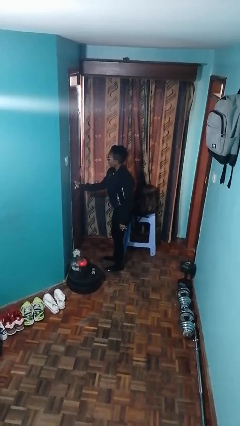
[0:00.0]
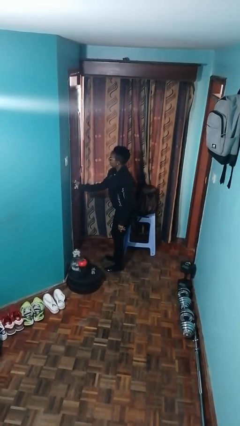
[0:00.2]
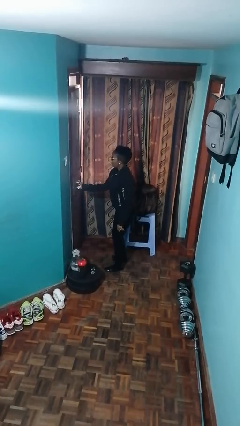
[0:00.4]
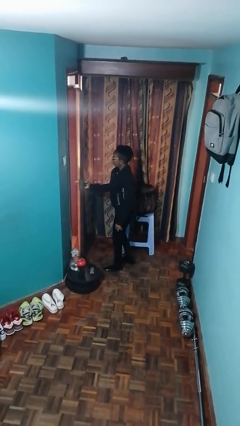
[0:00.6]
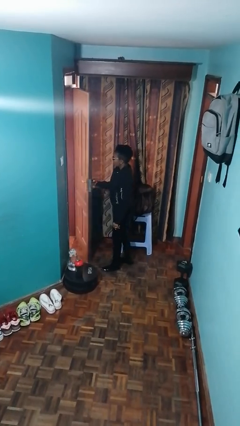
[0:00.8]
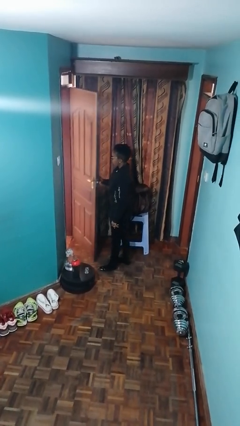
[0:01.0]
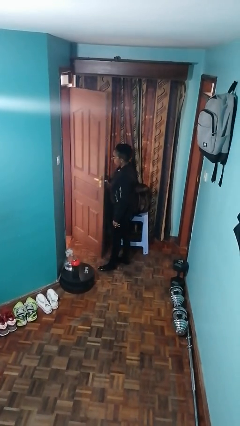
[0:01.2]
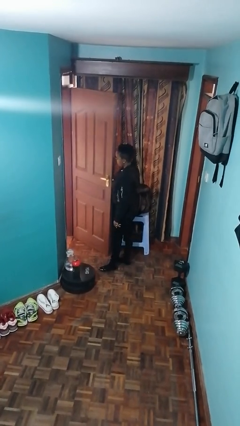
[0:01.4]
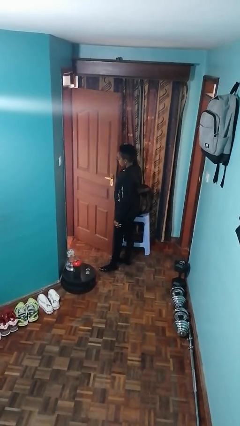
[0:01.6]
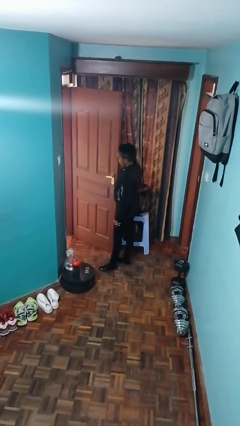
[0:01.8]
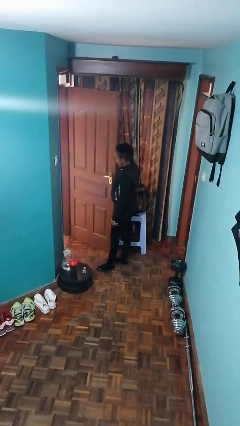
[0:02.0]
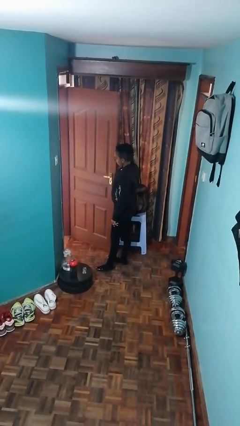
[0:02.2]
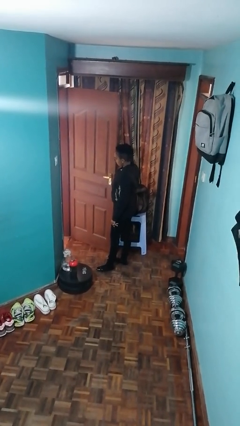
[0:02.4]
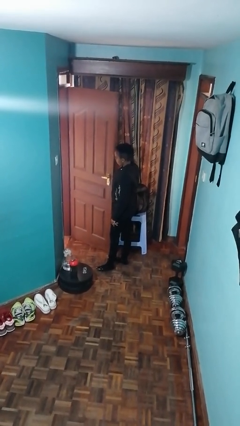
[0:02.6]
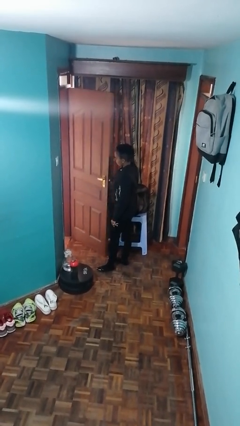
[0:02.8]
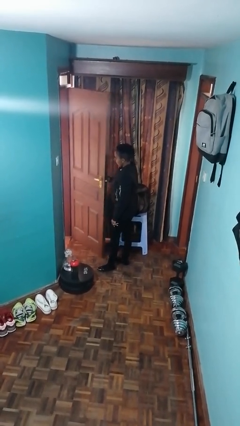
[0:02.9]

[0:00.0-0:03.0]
person opens facility door

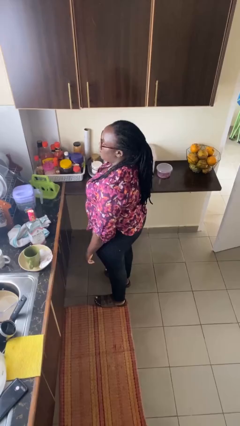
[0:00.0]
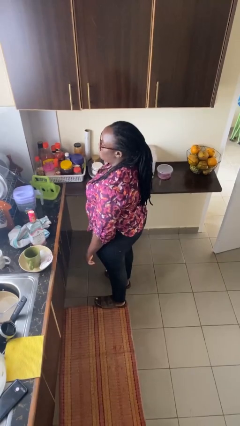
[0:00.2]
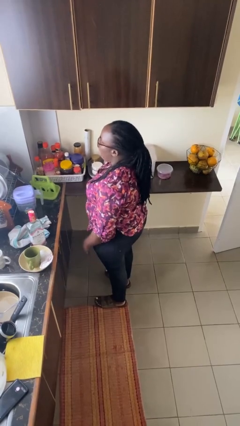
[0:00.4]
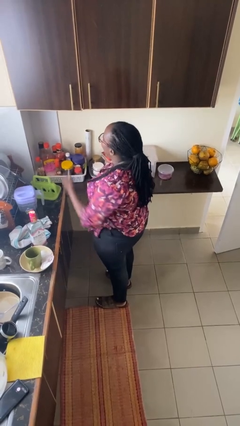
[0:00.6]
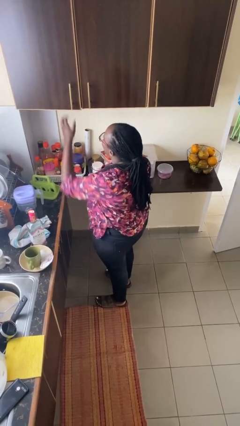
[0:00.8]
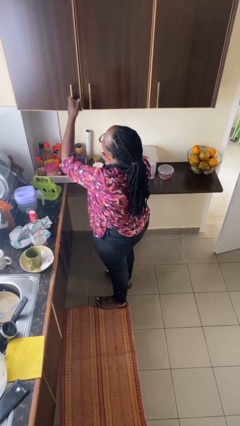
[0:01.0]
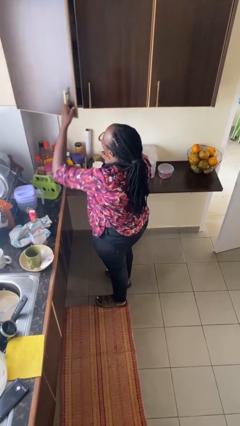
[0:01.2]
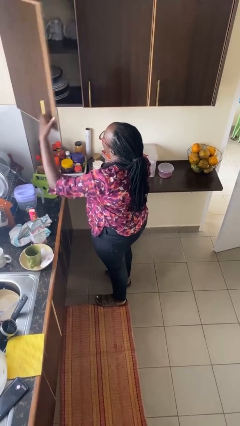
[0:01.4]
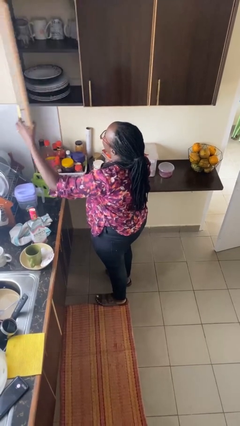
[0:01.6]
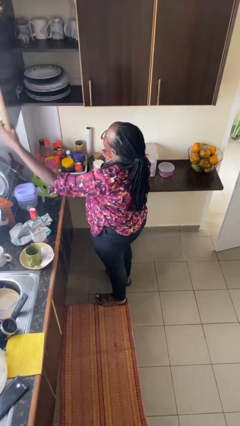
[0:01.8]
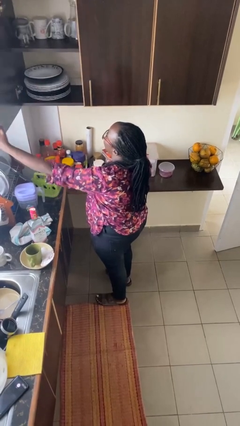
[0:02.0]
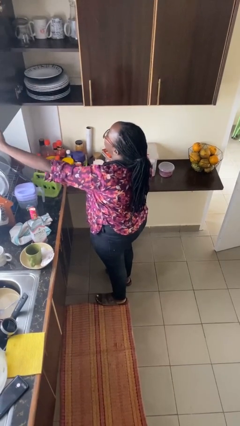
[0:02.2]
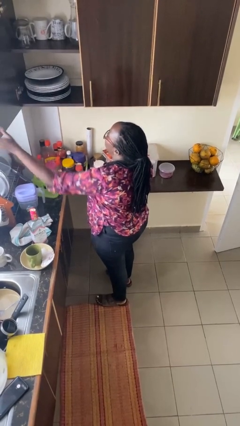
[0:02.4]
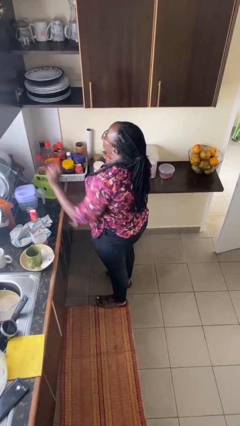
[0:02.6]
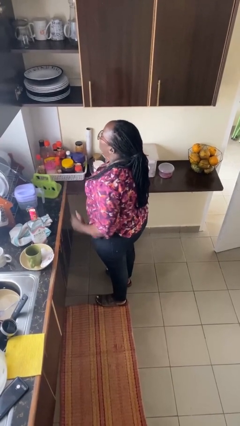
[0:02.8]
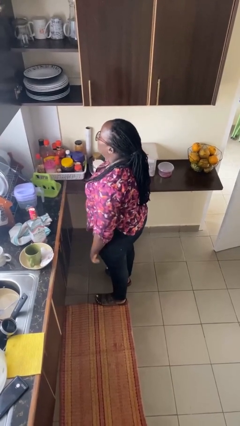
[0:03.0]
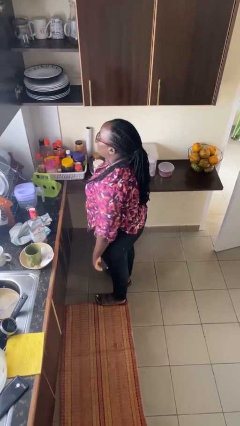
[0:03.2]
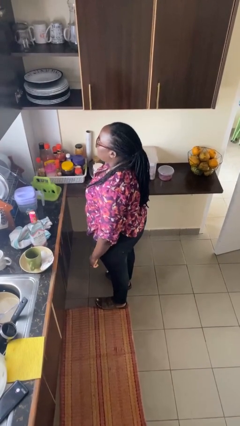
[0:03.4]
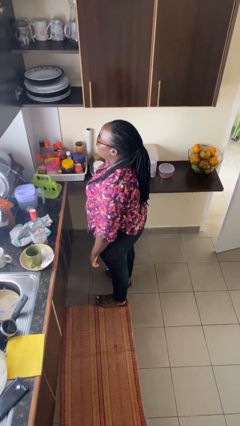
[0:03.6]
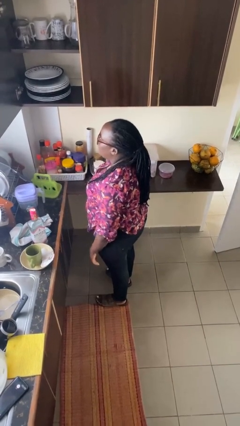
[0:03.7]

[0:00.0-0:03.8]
person opens cabinet

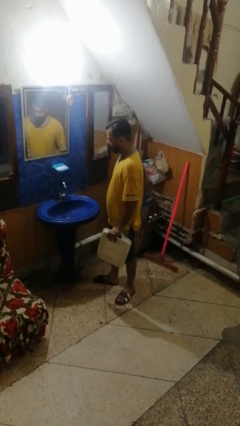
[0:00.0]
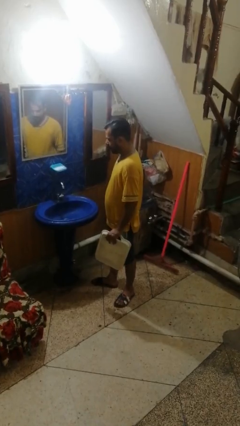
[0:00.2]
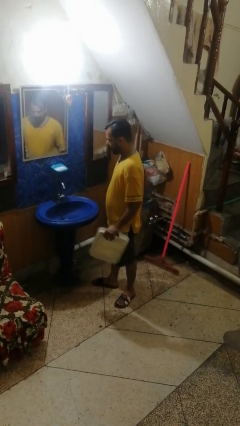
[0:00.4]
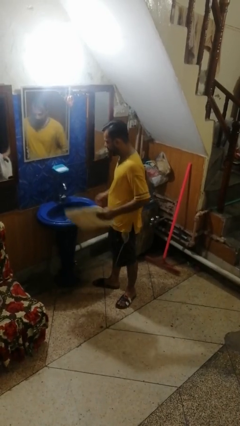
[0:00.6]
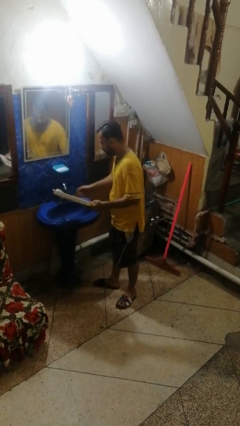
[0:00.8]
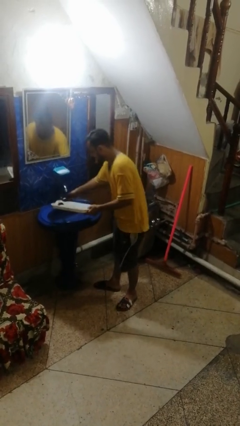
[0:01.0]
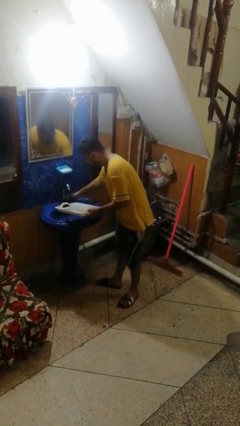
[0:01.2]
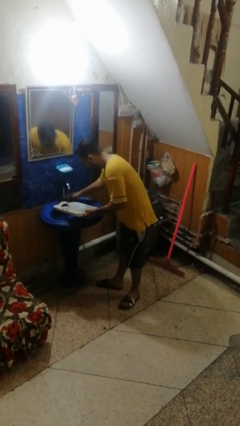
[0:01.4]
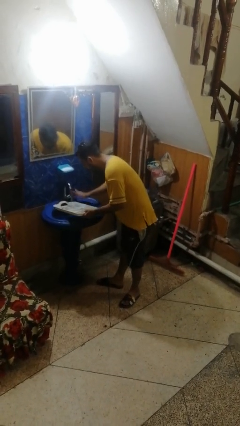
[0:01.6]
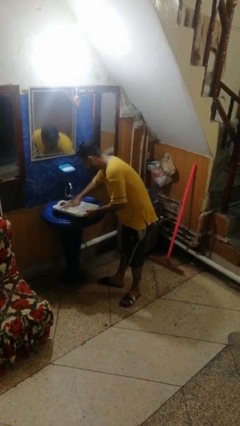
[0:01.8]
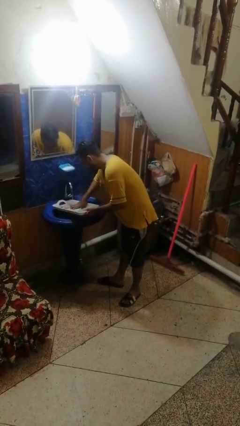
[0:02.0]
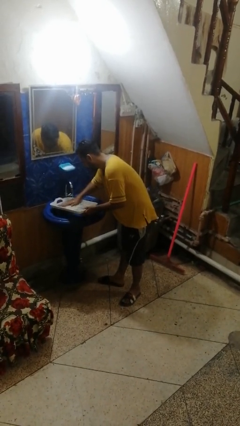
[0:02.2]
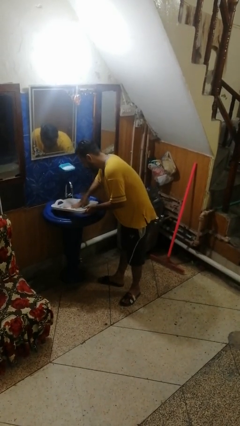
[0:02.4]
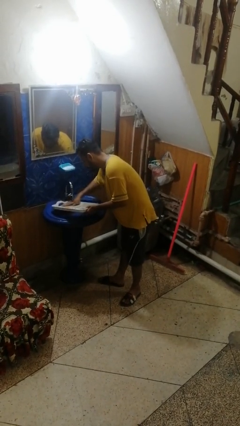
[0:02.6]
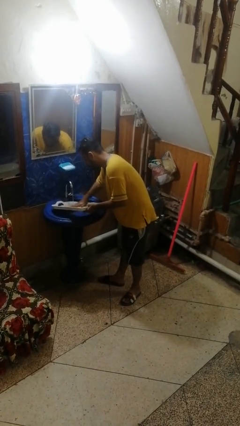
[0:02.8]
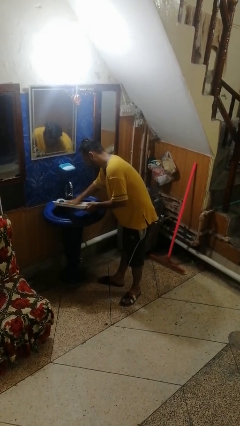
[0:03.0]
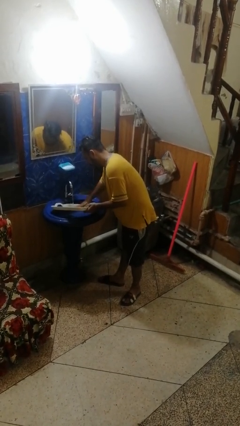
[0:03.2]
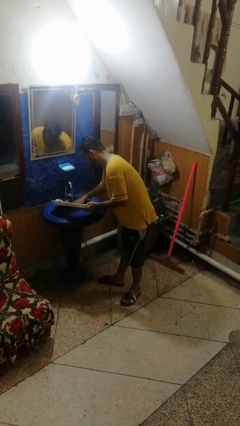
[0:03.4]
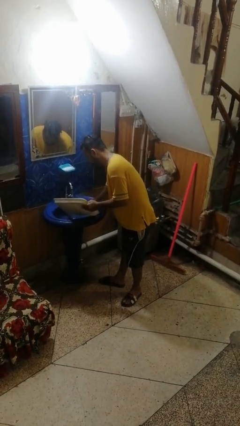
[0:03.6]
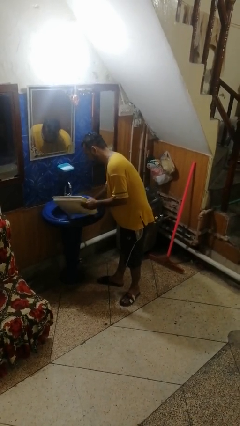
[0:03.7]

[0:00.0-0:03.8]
person washes dish

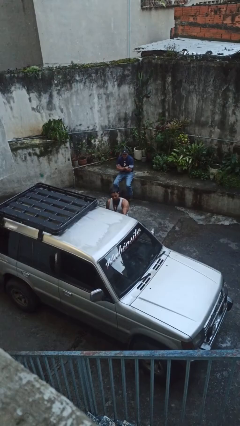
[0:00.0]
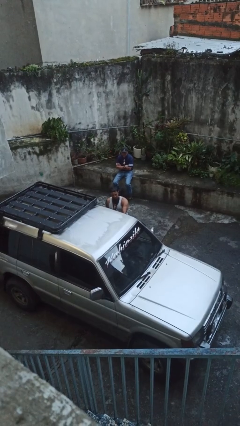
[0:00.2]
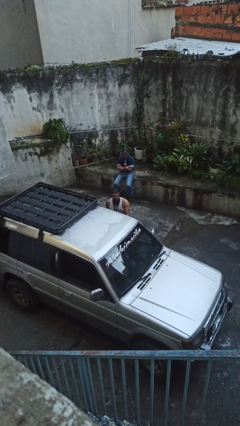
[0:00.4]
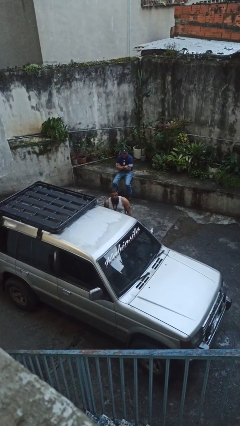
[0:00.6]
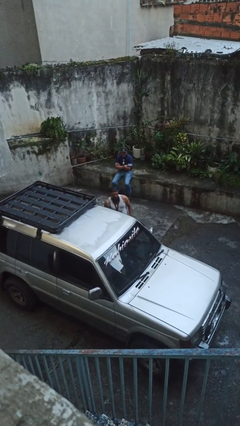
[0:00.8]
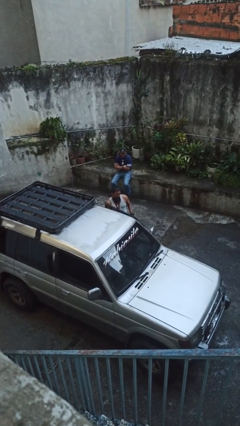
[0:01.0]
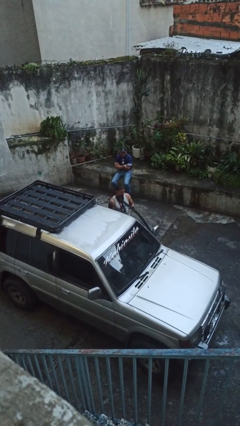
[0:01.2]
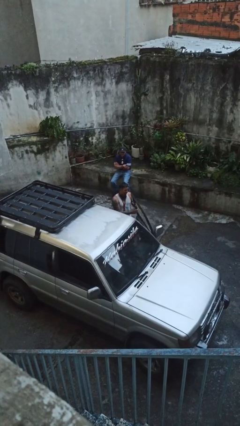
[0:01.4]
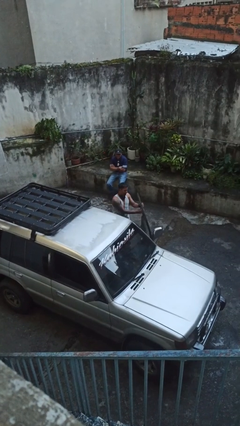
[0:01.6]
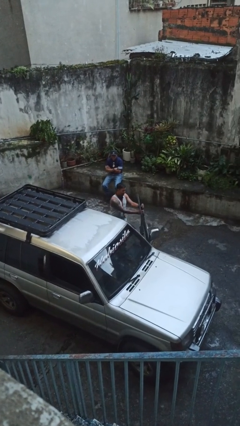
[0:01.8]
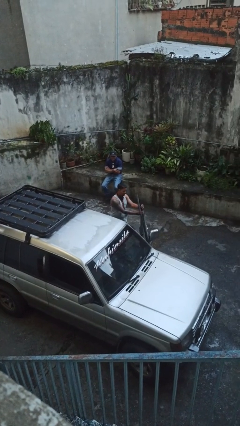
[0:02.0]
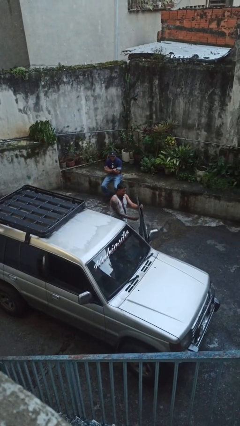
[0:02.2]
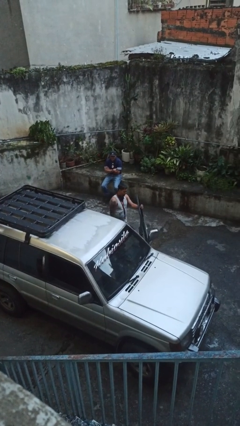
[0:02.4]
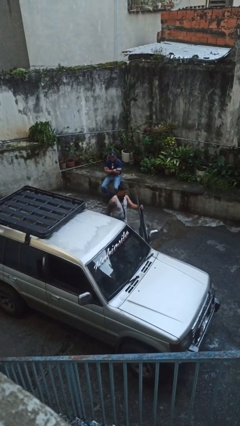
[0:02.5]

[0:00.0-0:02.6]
person opens car door

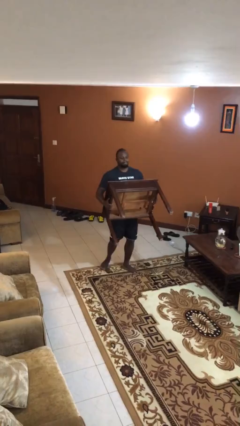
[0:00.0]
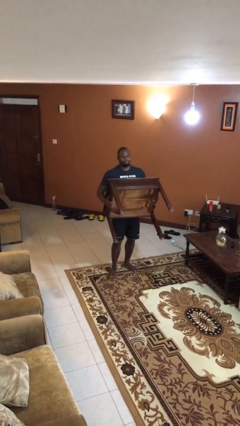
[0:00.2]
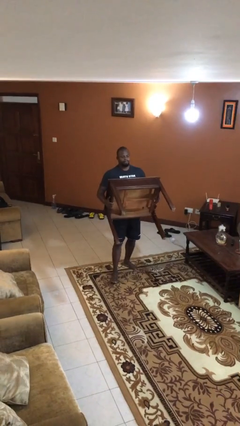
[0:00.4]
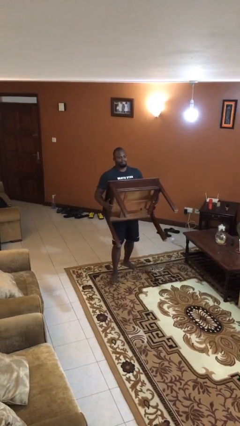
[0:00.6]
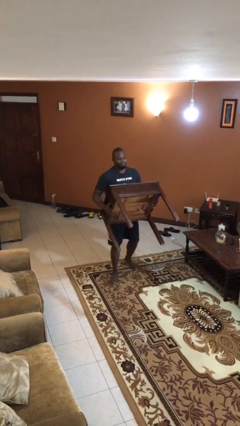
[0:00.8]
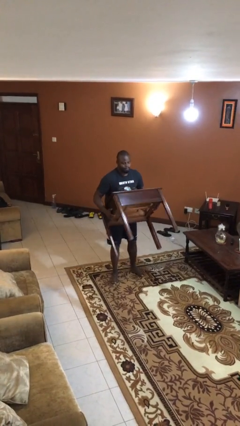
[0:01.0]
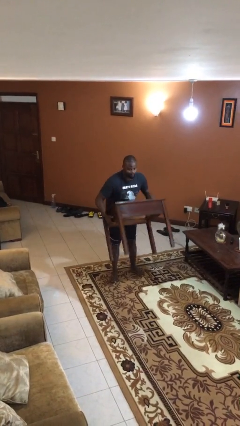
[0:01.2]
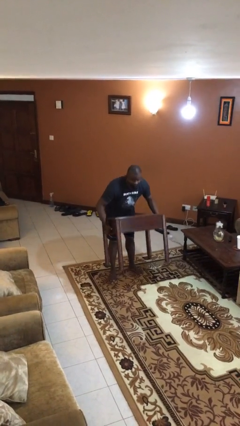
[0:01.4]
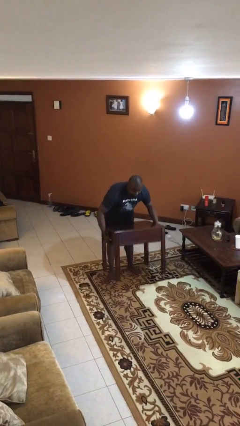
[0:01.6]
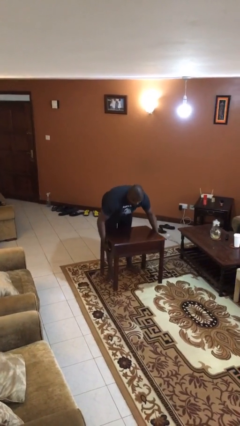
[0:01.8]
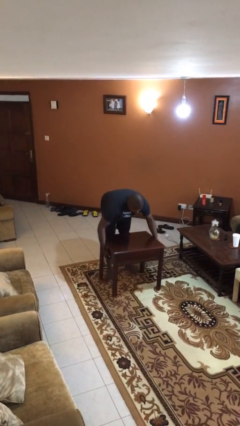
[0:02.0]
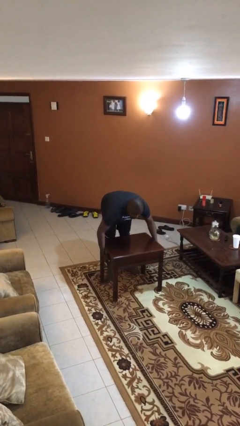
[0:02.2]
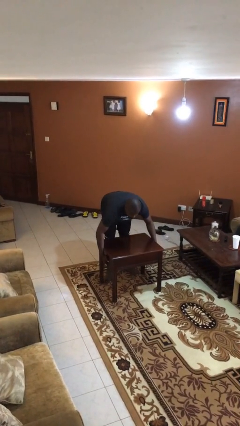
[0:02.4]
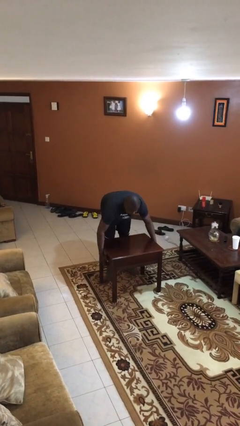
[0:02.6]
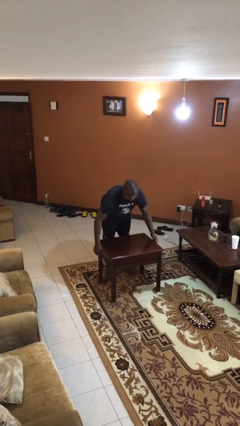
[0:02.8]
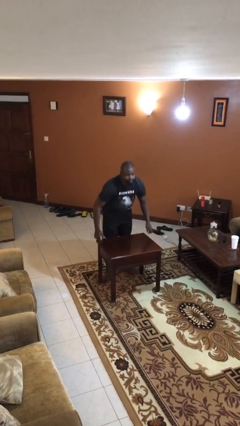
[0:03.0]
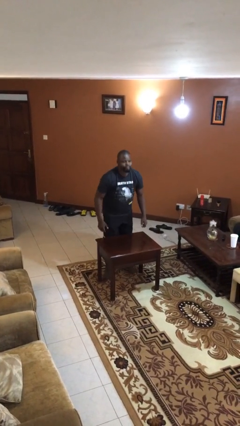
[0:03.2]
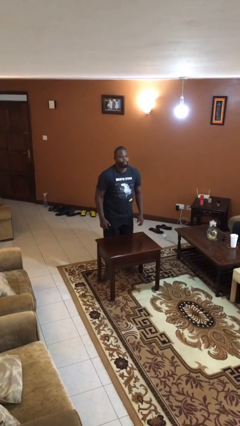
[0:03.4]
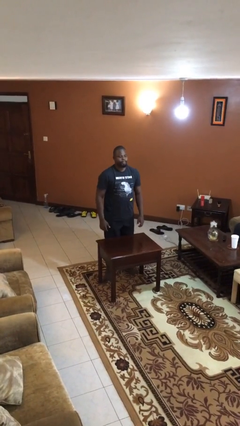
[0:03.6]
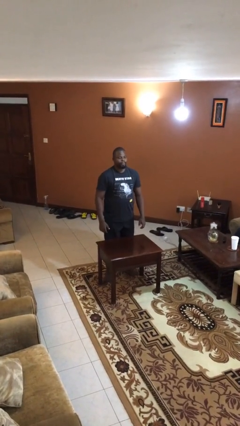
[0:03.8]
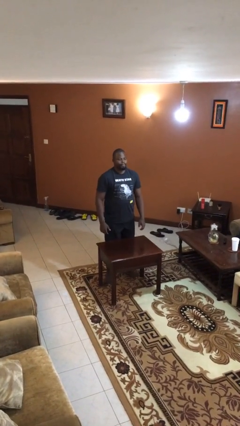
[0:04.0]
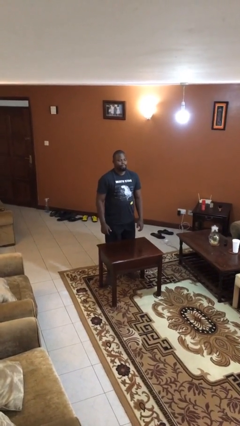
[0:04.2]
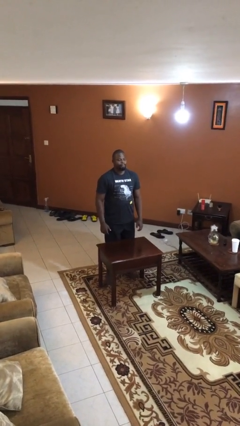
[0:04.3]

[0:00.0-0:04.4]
person puts down object on floor

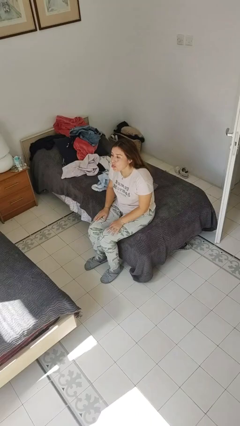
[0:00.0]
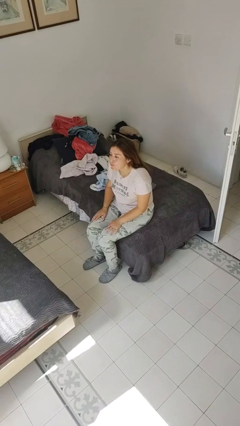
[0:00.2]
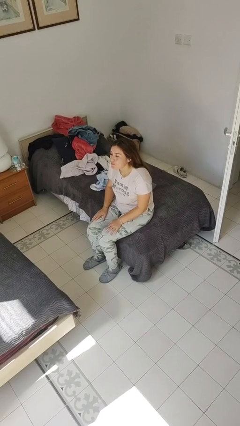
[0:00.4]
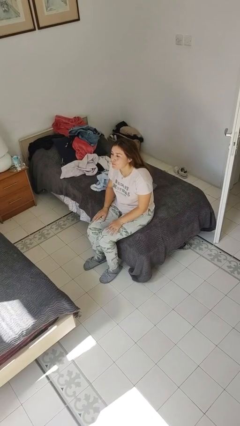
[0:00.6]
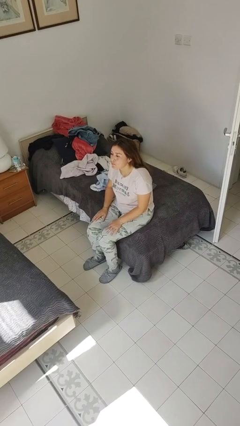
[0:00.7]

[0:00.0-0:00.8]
person sticks out tongue
